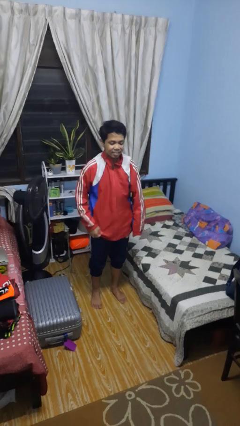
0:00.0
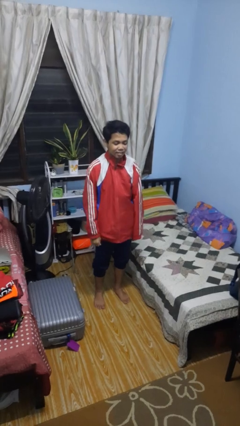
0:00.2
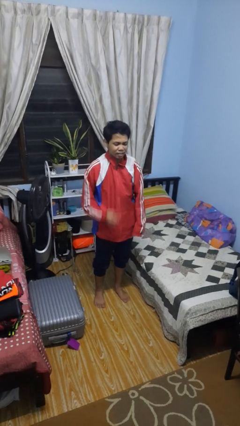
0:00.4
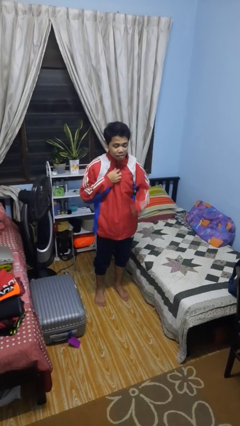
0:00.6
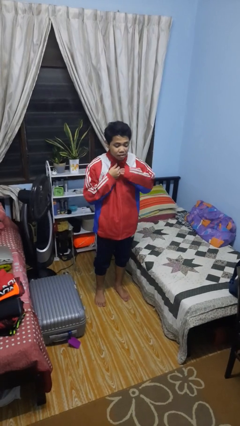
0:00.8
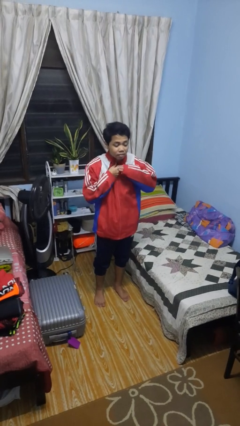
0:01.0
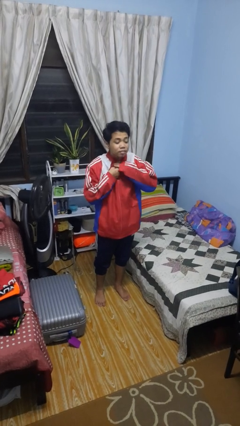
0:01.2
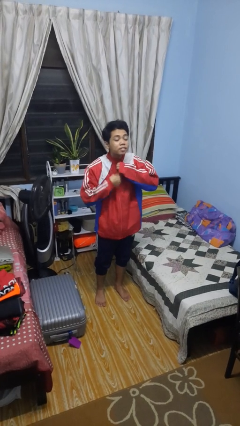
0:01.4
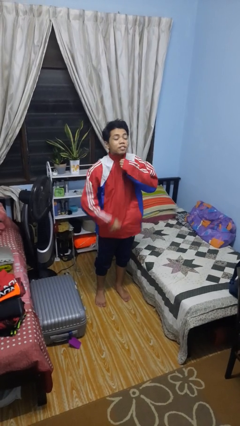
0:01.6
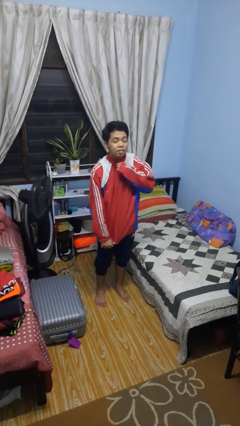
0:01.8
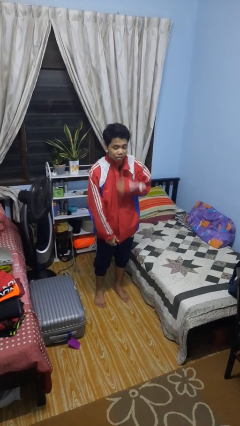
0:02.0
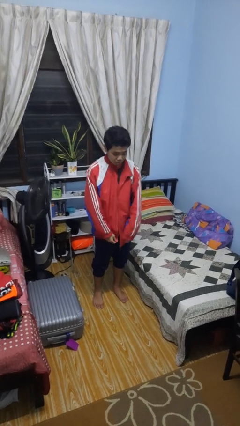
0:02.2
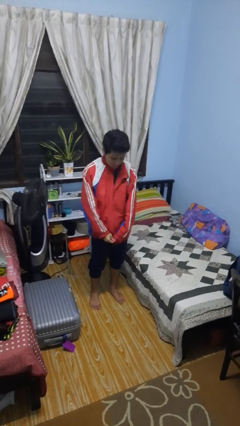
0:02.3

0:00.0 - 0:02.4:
person unzips jacket

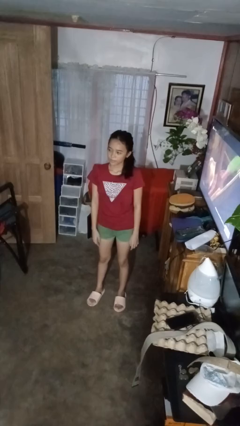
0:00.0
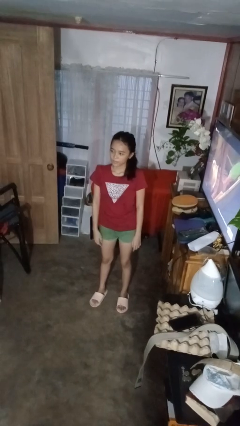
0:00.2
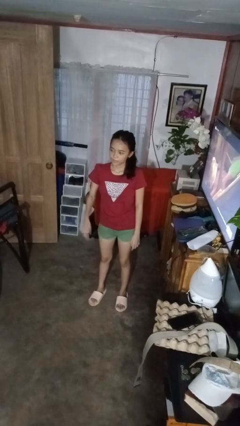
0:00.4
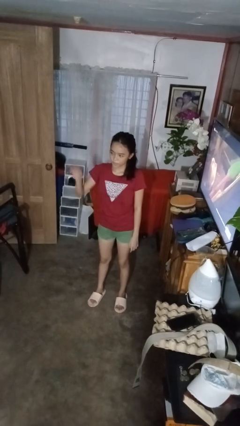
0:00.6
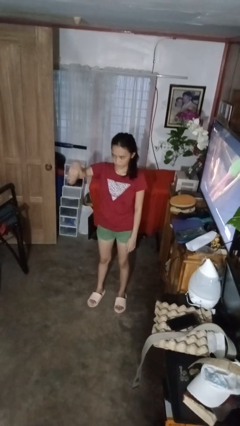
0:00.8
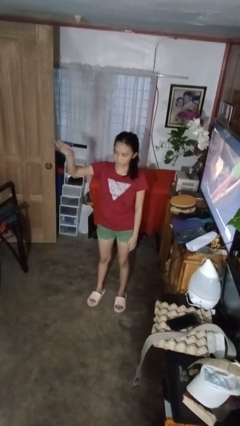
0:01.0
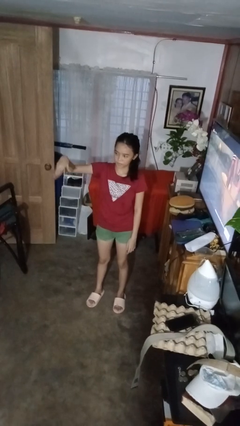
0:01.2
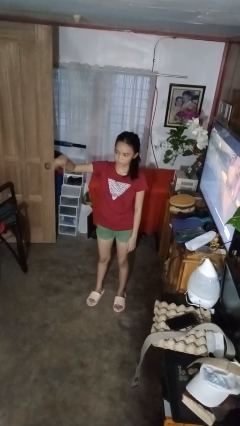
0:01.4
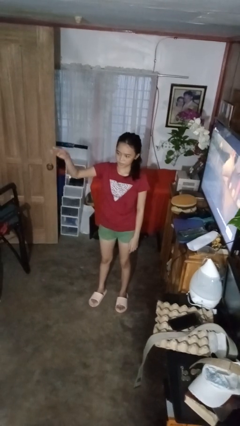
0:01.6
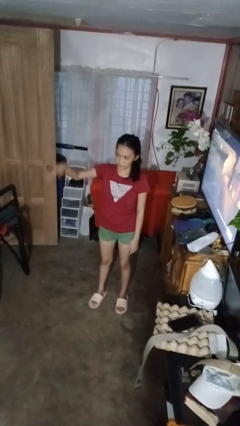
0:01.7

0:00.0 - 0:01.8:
person gestures come here

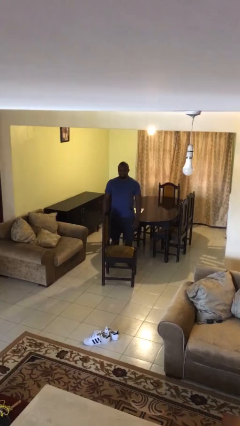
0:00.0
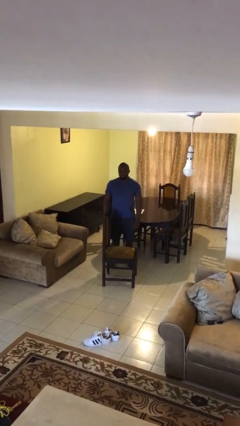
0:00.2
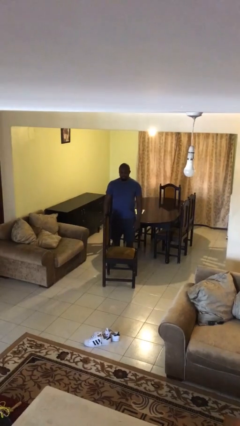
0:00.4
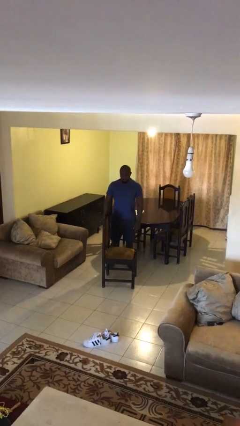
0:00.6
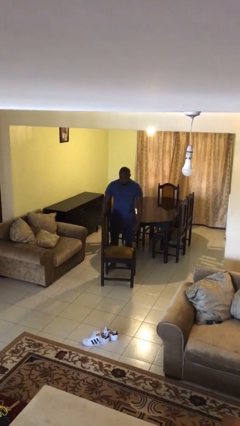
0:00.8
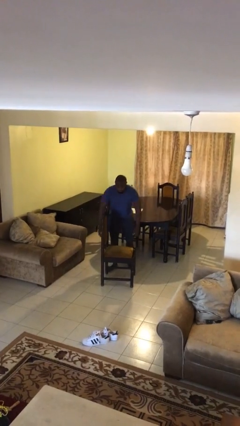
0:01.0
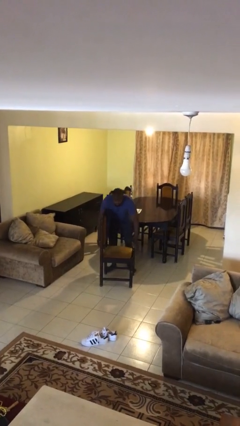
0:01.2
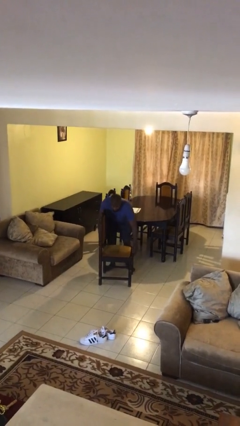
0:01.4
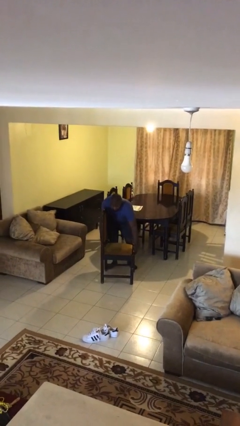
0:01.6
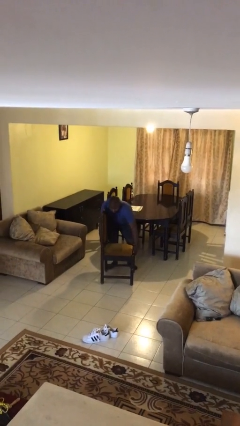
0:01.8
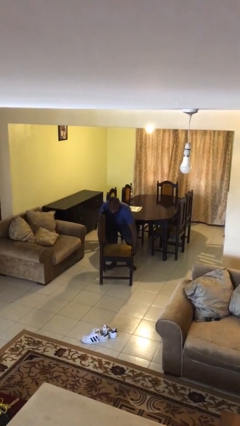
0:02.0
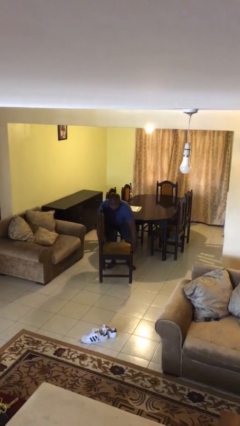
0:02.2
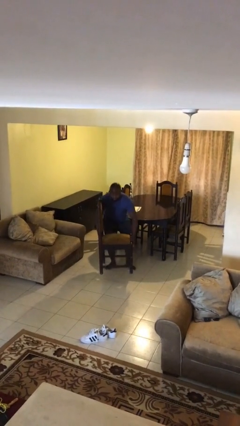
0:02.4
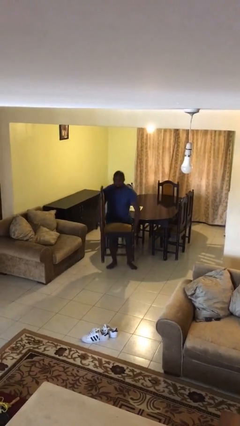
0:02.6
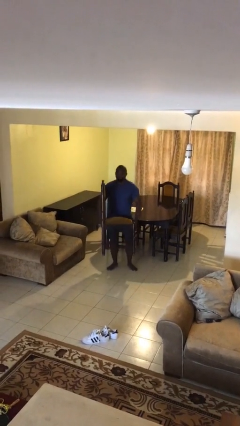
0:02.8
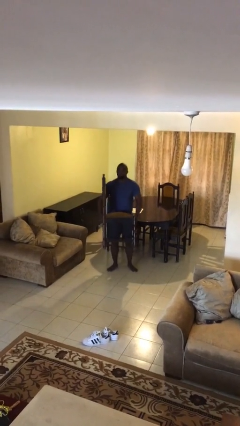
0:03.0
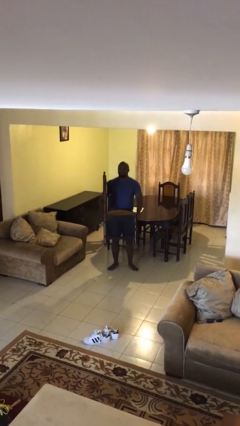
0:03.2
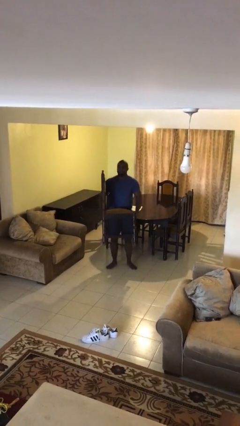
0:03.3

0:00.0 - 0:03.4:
person picks up object from floor

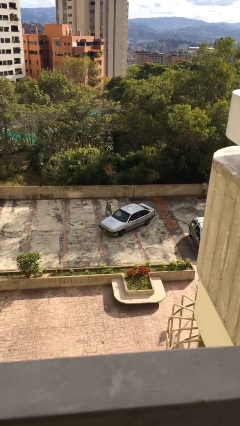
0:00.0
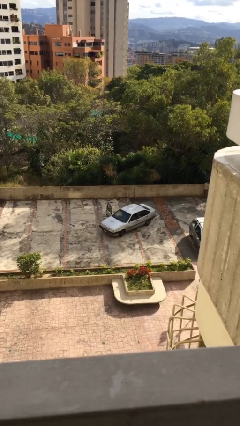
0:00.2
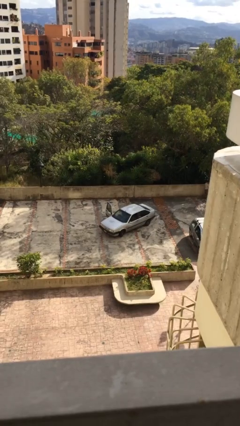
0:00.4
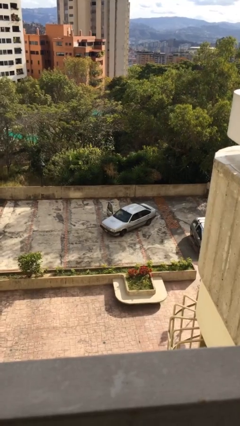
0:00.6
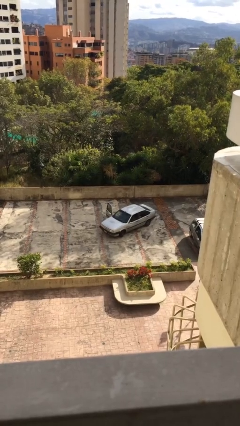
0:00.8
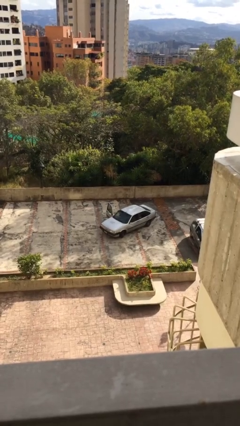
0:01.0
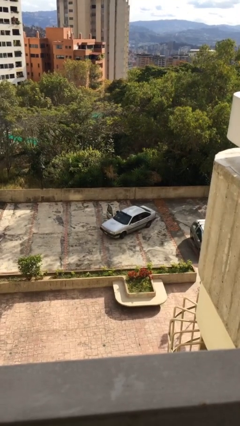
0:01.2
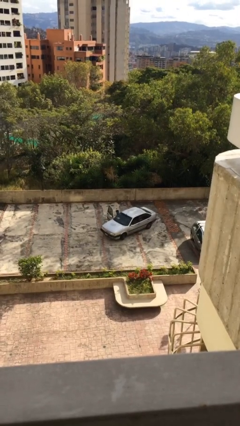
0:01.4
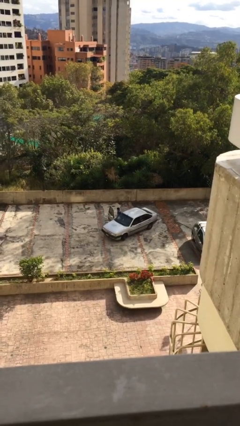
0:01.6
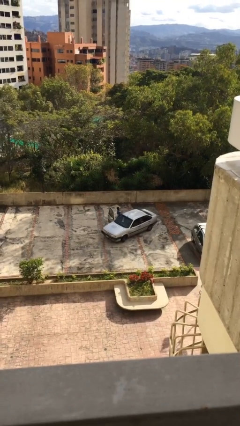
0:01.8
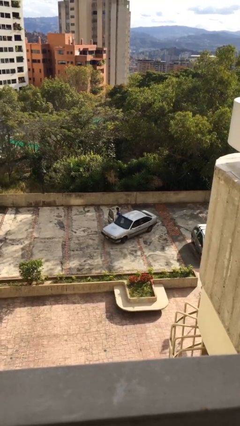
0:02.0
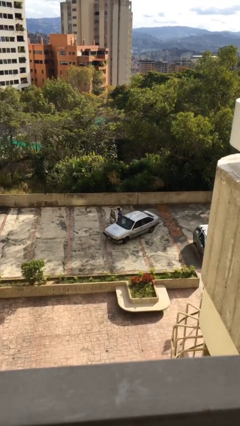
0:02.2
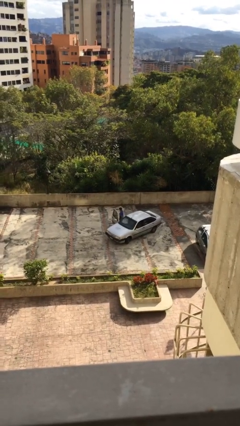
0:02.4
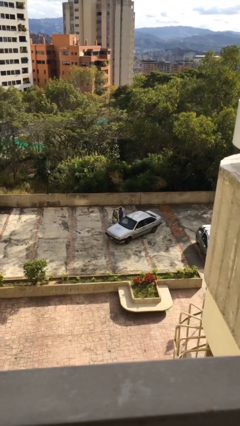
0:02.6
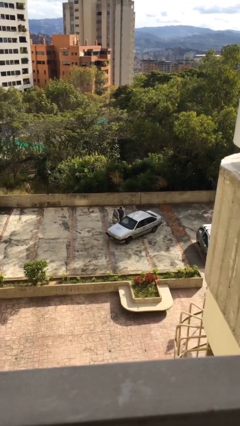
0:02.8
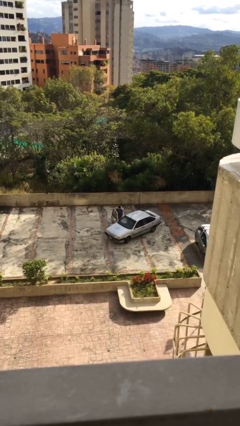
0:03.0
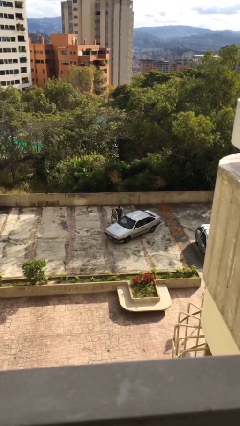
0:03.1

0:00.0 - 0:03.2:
person exits car

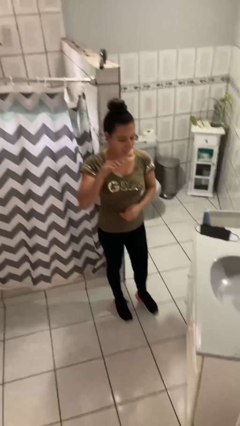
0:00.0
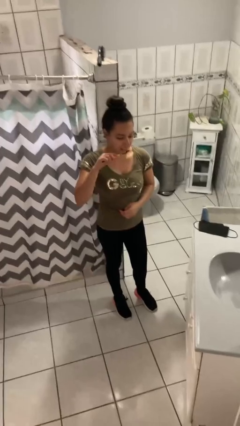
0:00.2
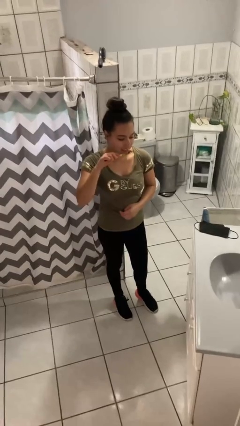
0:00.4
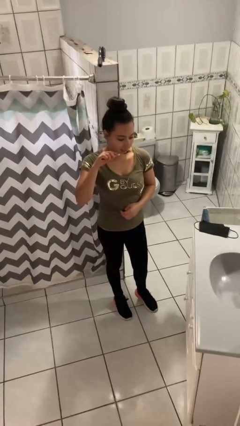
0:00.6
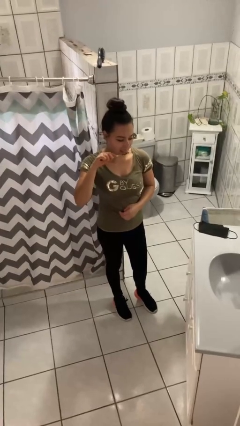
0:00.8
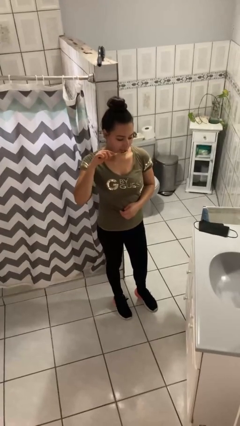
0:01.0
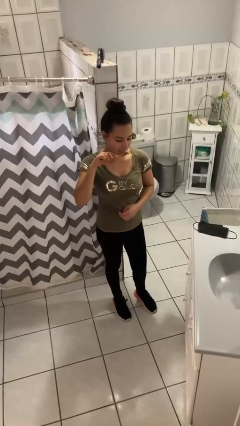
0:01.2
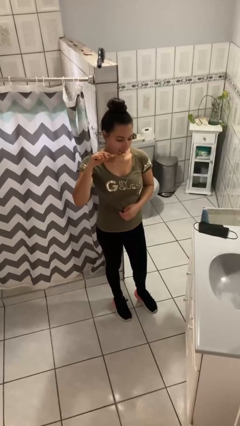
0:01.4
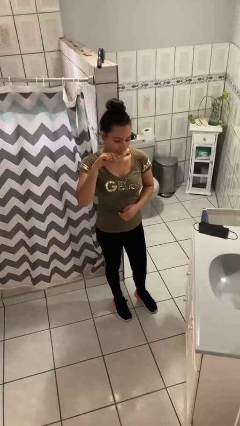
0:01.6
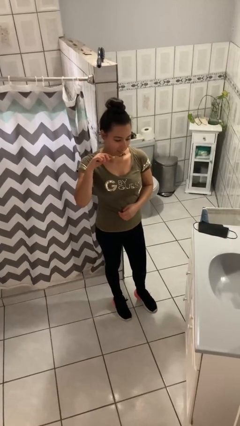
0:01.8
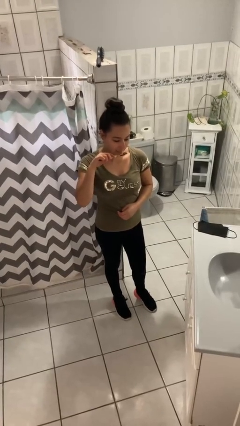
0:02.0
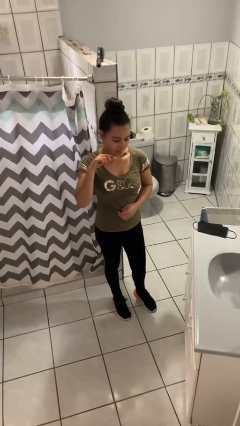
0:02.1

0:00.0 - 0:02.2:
person brushes teeth
